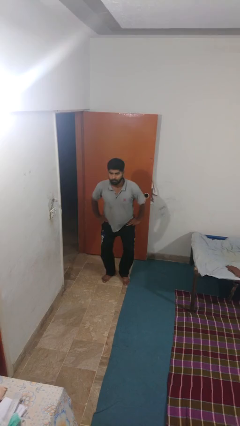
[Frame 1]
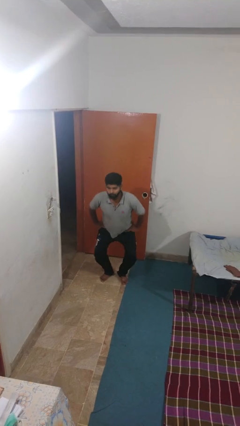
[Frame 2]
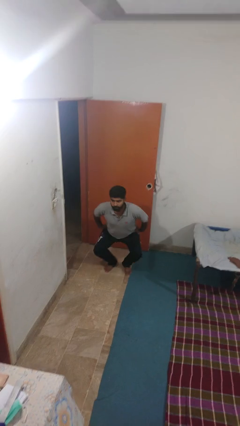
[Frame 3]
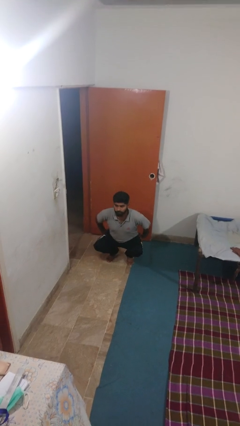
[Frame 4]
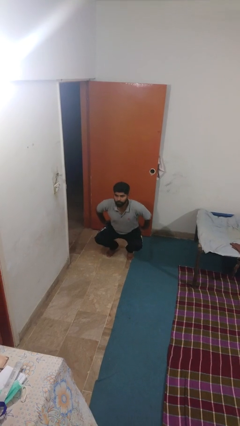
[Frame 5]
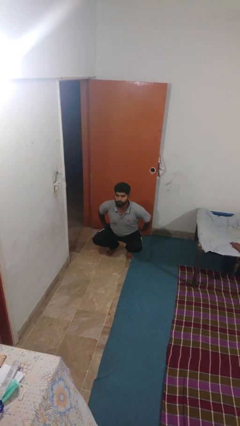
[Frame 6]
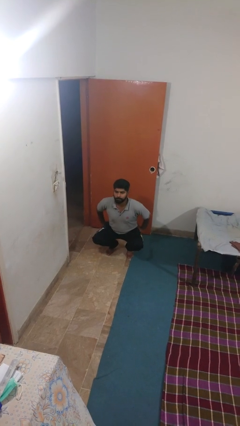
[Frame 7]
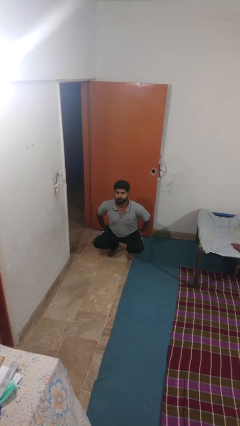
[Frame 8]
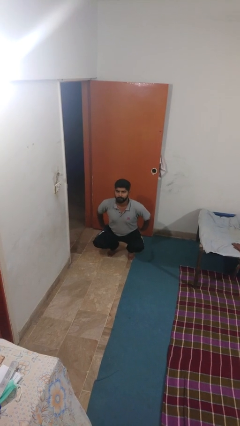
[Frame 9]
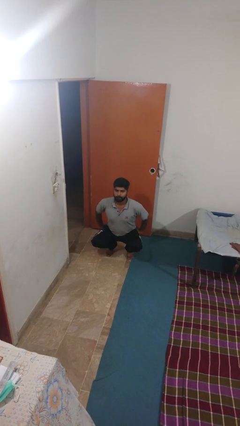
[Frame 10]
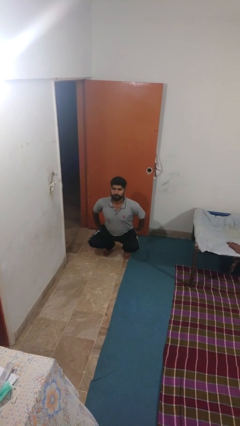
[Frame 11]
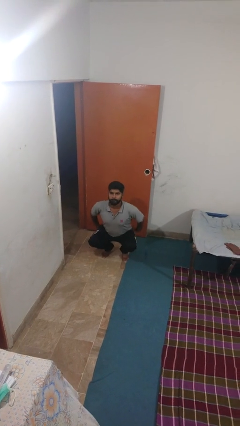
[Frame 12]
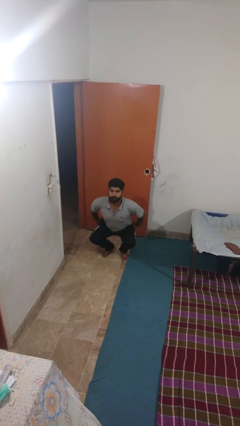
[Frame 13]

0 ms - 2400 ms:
person squats

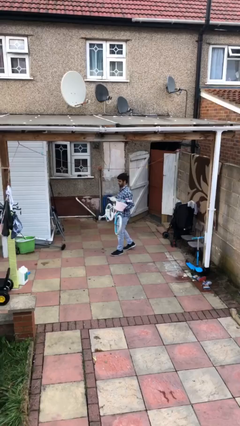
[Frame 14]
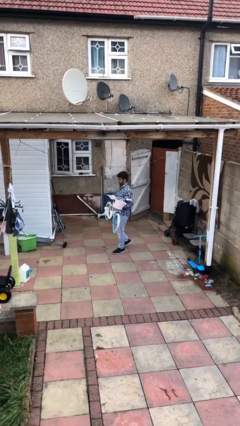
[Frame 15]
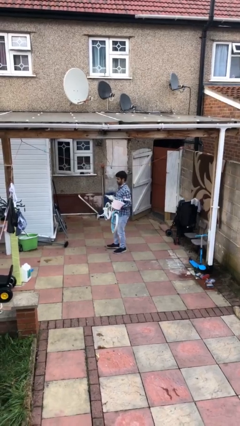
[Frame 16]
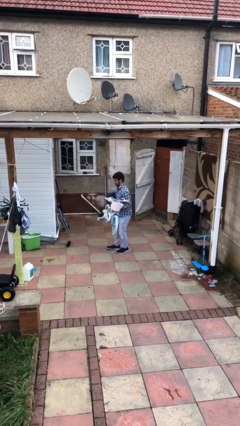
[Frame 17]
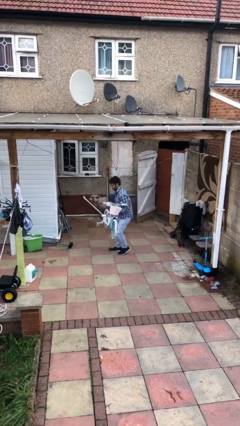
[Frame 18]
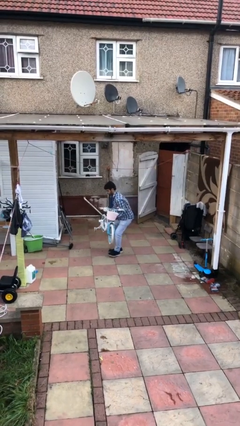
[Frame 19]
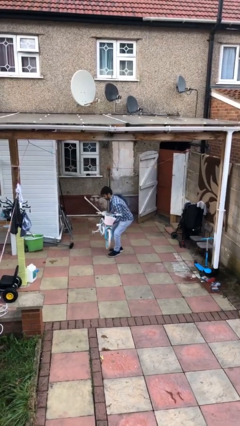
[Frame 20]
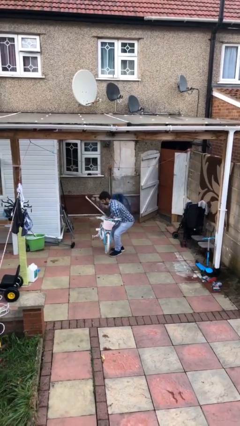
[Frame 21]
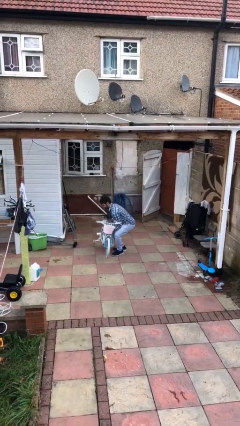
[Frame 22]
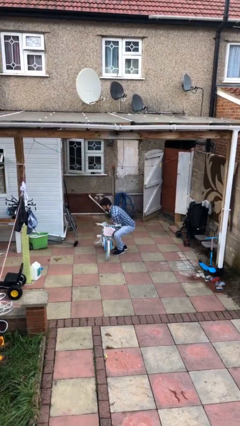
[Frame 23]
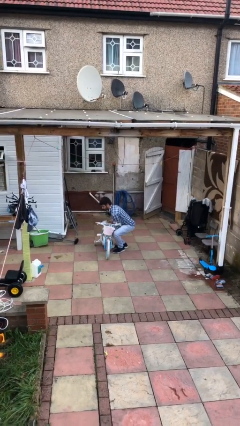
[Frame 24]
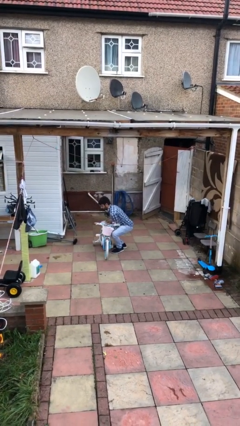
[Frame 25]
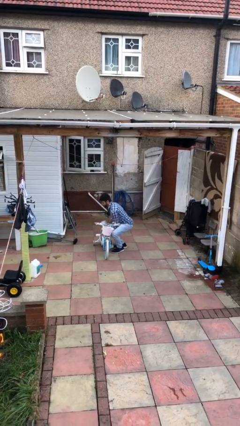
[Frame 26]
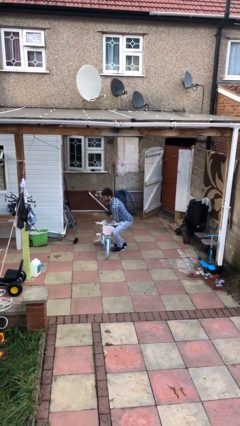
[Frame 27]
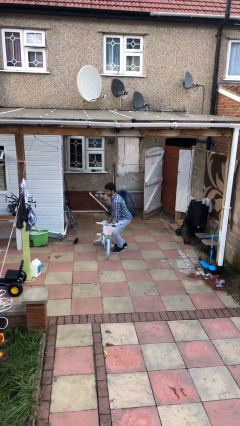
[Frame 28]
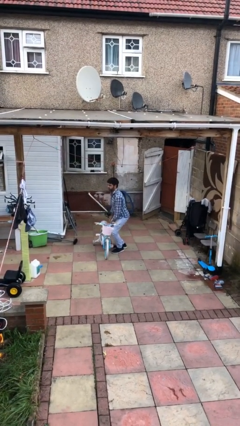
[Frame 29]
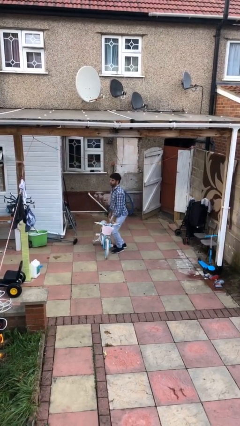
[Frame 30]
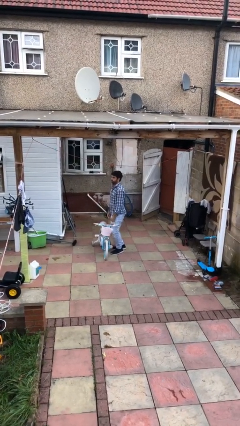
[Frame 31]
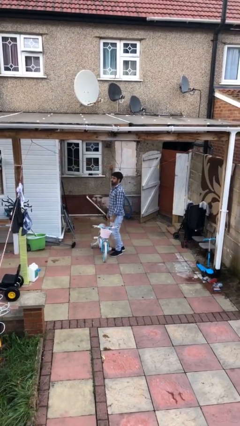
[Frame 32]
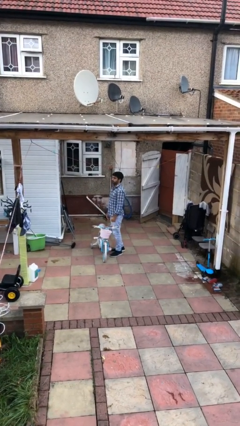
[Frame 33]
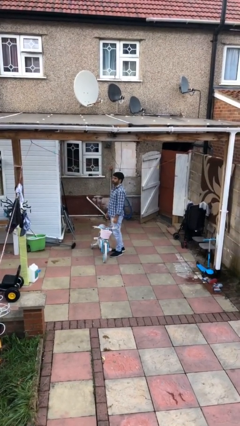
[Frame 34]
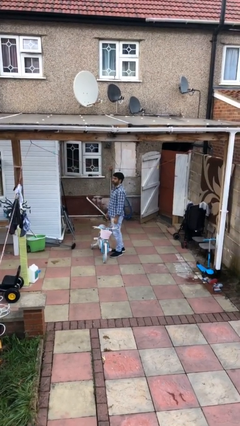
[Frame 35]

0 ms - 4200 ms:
person puts down object on floor

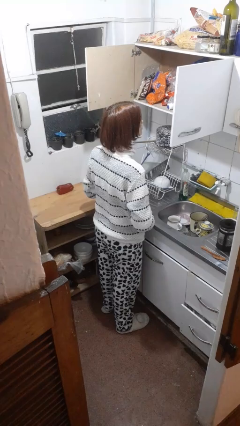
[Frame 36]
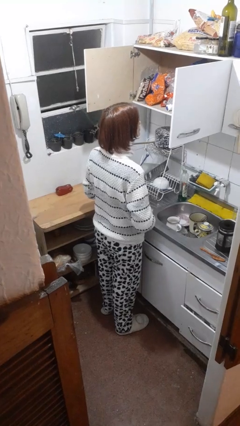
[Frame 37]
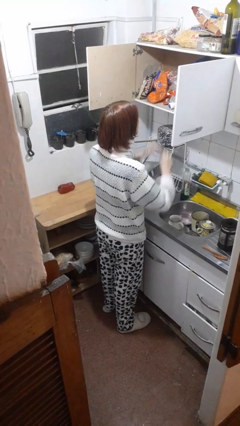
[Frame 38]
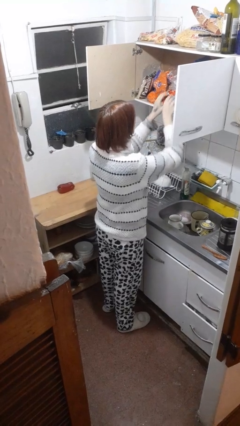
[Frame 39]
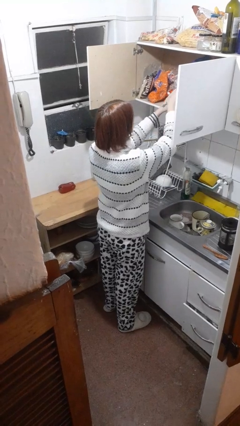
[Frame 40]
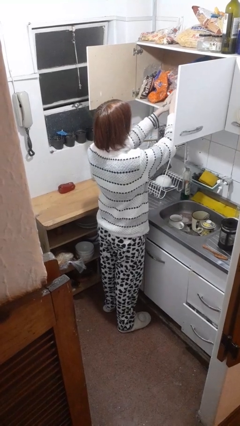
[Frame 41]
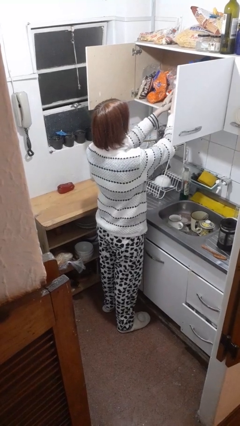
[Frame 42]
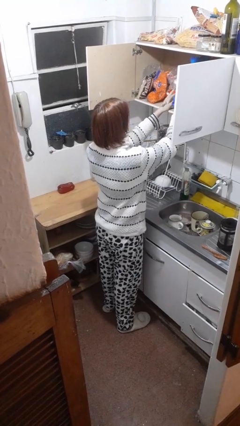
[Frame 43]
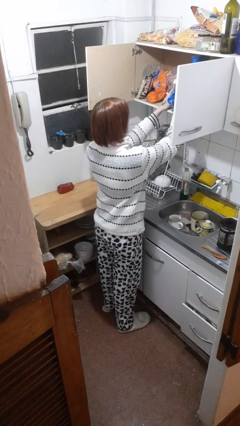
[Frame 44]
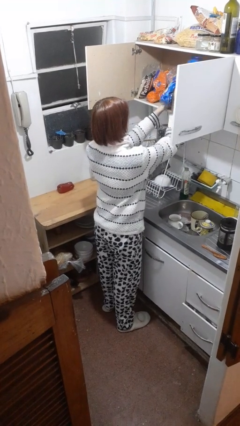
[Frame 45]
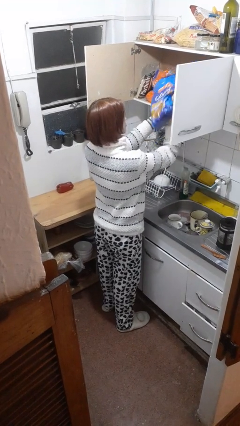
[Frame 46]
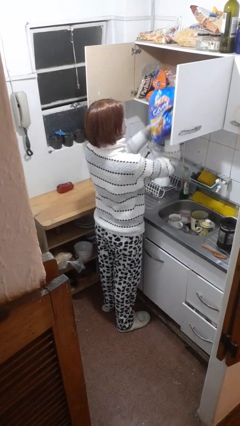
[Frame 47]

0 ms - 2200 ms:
person takes object from cabinet

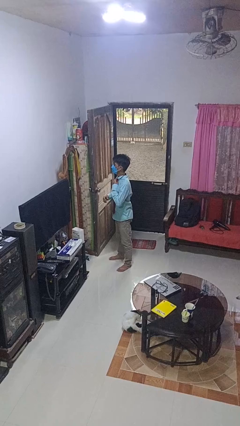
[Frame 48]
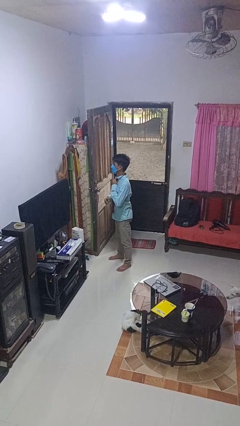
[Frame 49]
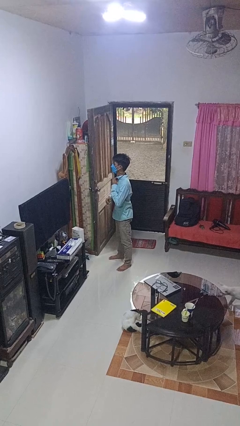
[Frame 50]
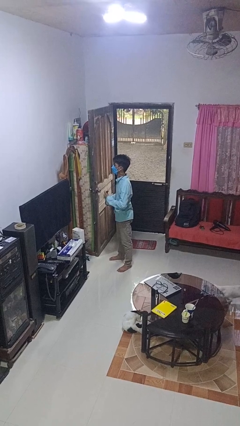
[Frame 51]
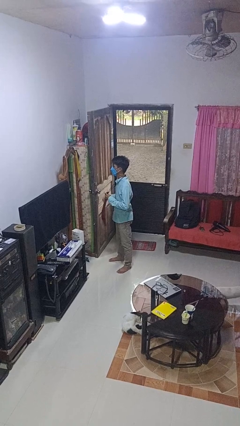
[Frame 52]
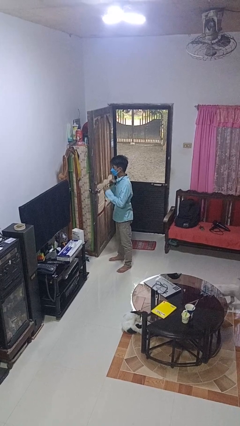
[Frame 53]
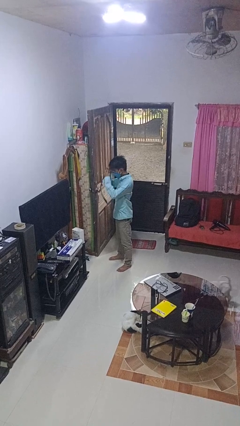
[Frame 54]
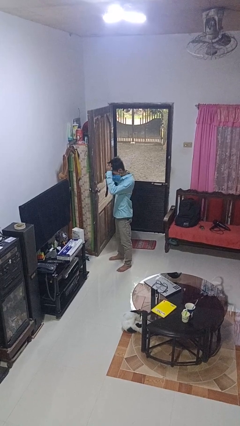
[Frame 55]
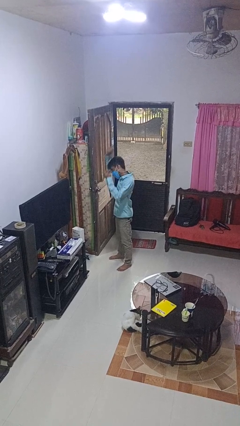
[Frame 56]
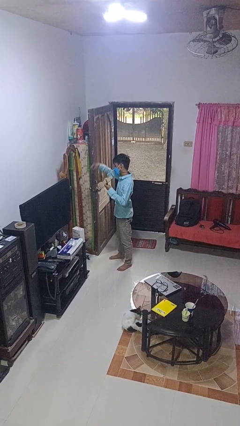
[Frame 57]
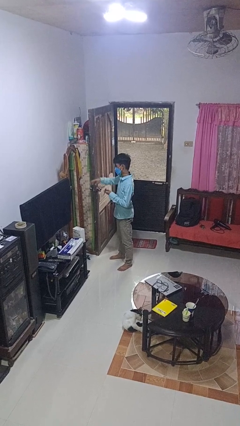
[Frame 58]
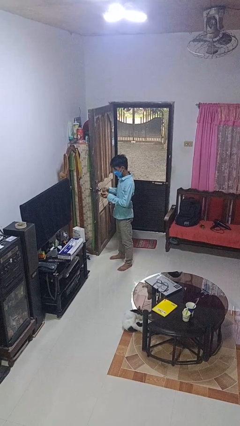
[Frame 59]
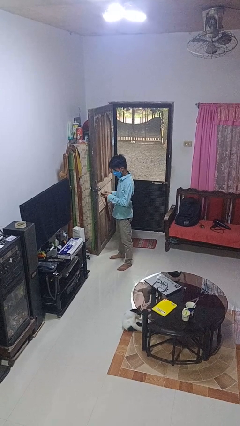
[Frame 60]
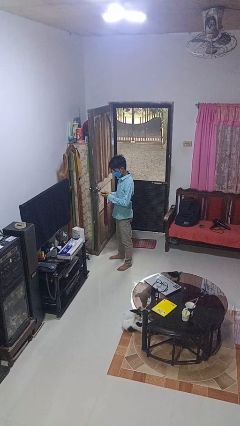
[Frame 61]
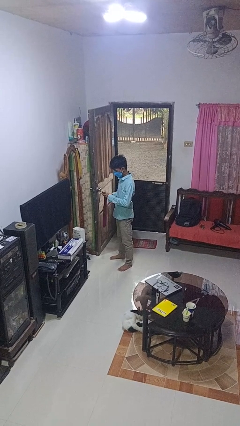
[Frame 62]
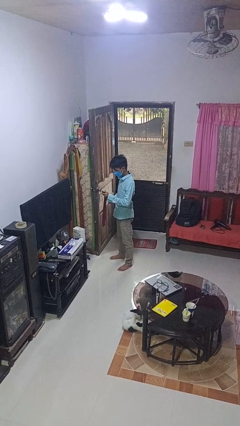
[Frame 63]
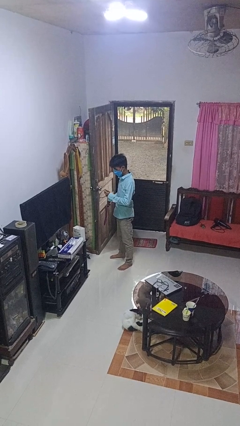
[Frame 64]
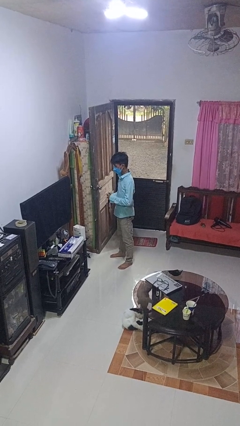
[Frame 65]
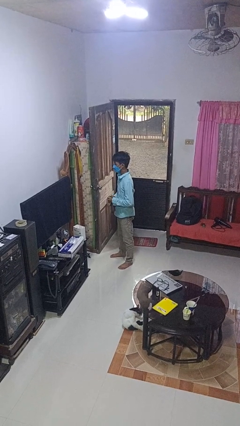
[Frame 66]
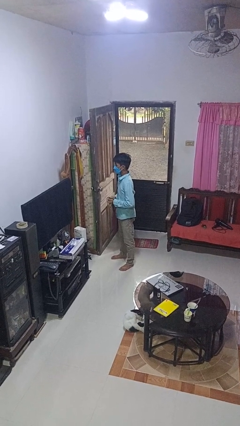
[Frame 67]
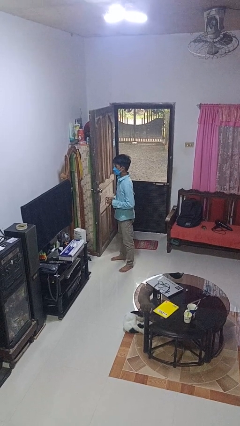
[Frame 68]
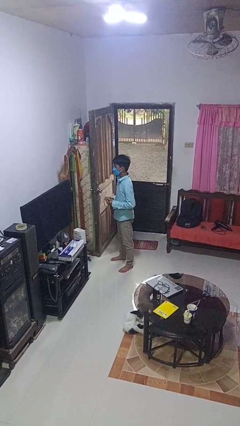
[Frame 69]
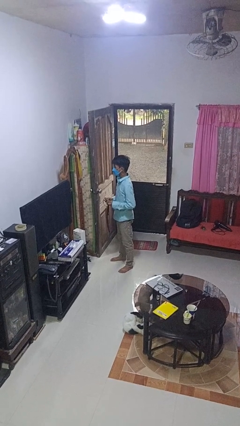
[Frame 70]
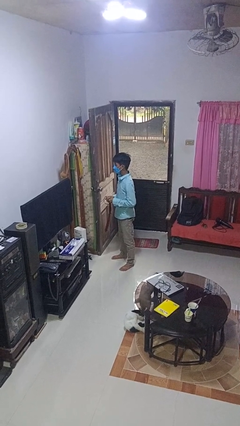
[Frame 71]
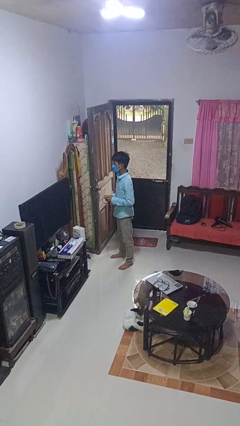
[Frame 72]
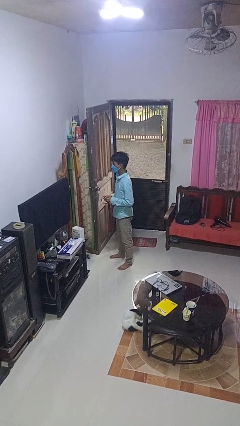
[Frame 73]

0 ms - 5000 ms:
person takes off necktie

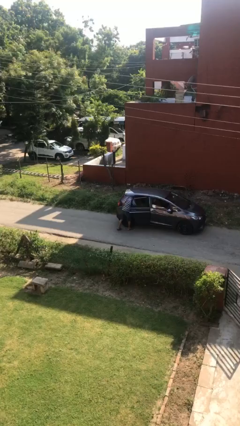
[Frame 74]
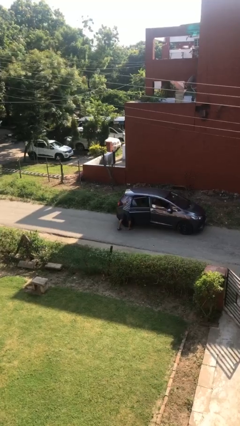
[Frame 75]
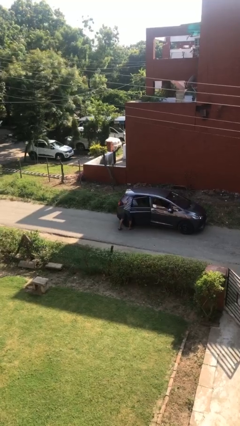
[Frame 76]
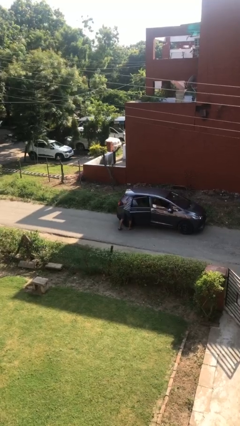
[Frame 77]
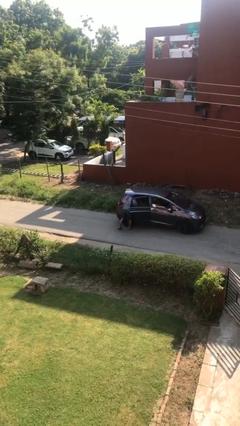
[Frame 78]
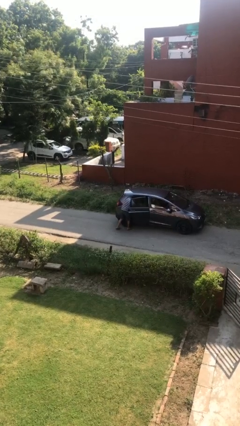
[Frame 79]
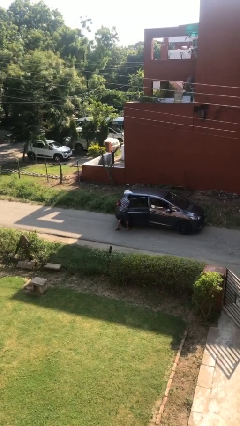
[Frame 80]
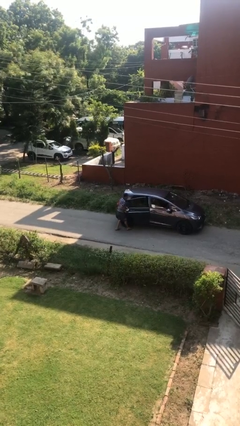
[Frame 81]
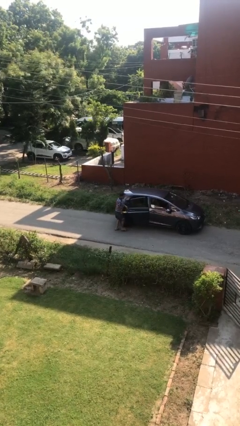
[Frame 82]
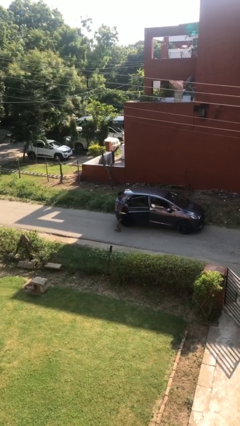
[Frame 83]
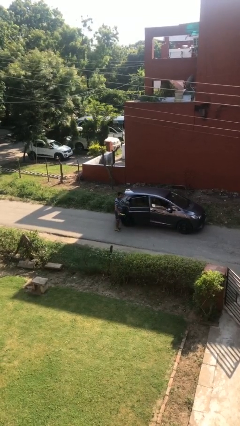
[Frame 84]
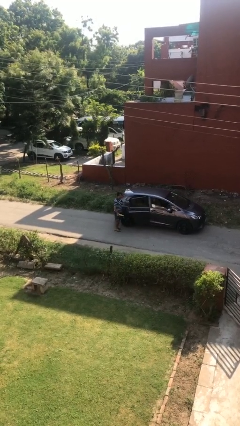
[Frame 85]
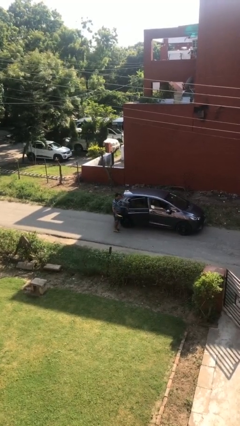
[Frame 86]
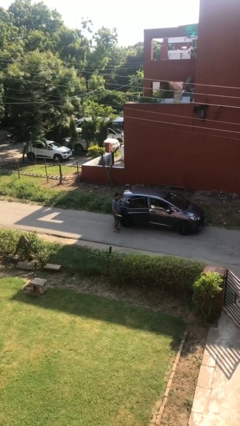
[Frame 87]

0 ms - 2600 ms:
person unloads car

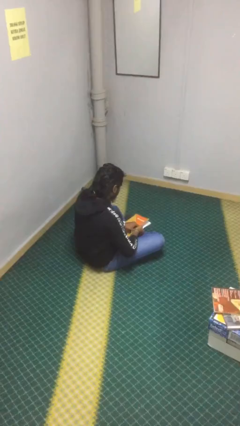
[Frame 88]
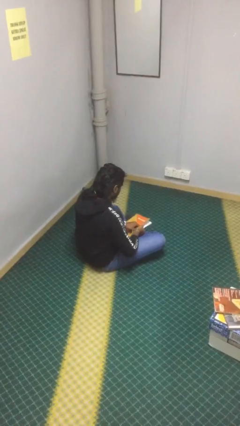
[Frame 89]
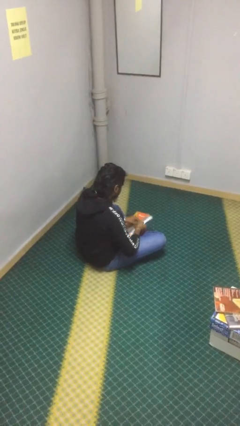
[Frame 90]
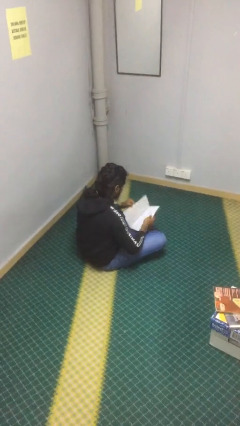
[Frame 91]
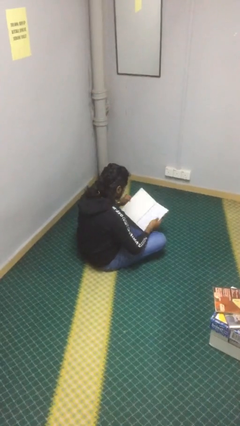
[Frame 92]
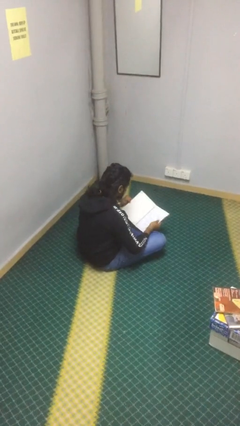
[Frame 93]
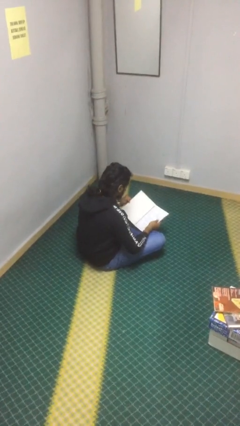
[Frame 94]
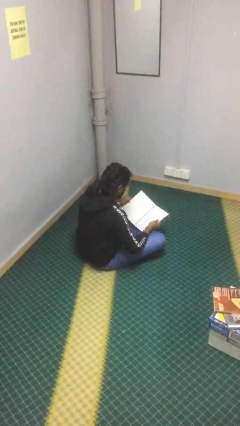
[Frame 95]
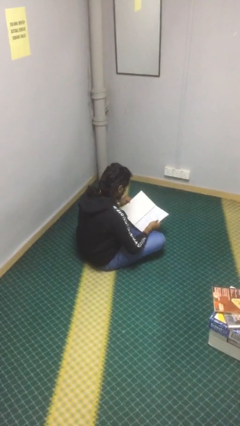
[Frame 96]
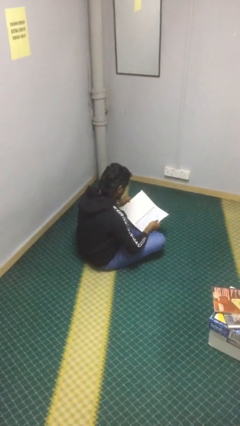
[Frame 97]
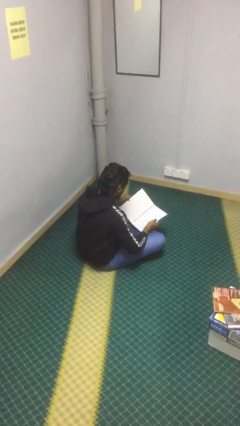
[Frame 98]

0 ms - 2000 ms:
person reads book
